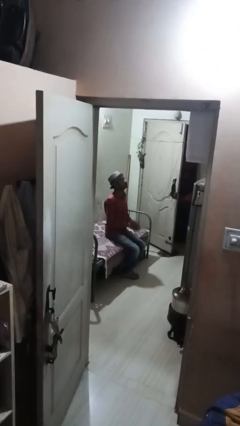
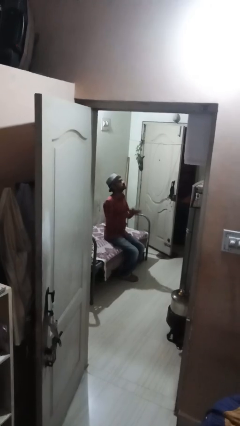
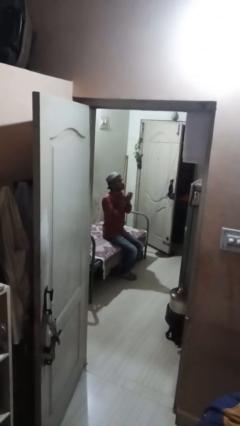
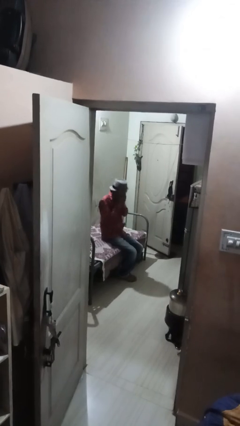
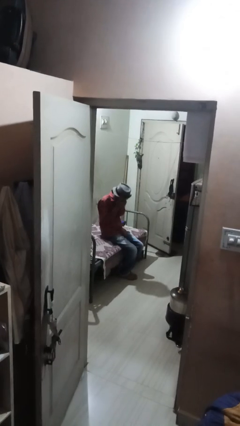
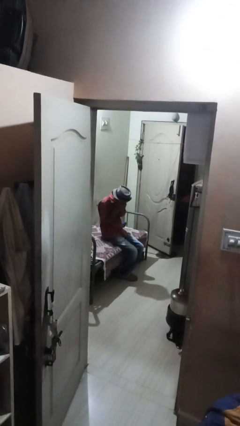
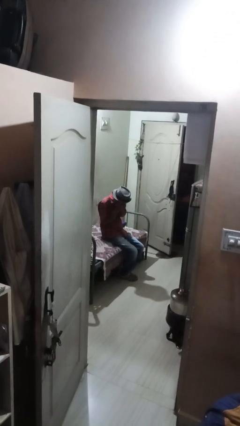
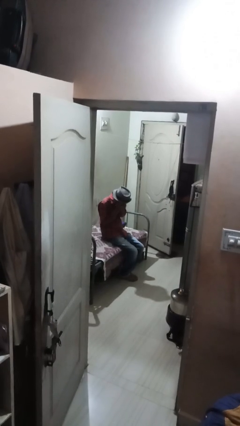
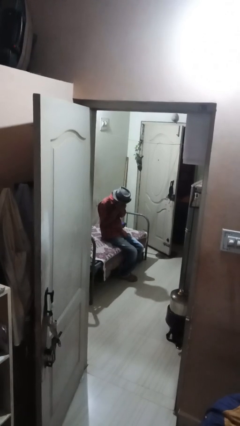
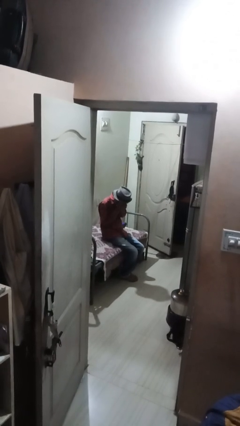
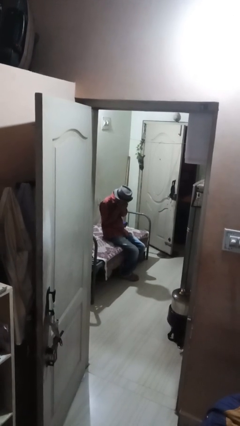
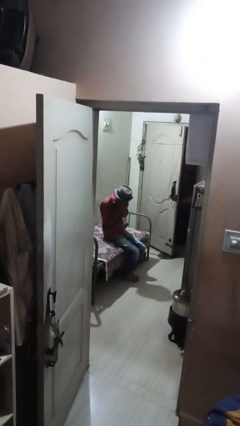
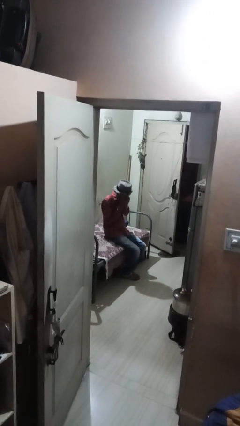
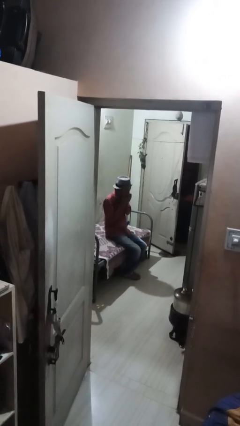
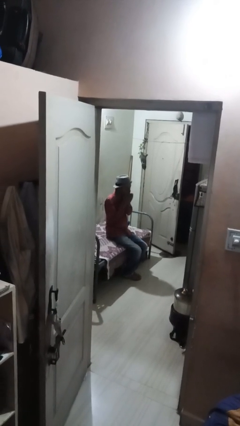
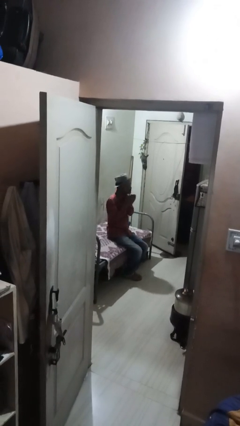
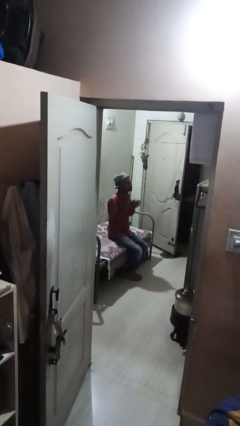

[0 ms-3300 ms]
person sneezes into hand

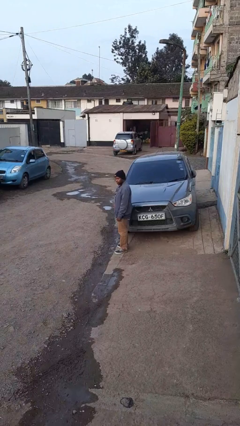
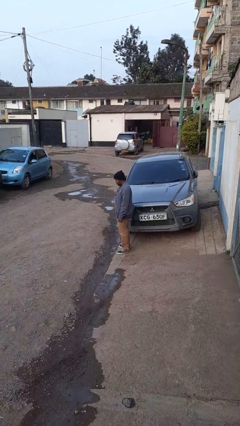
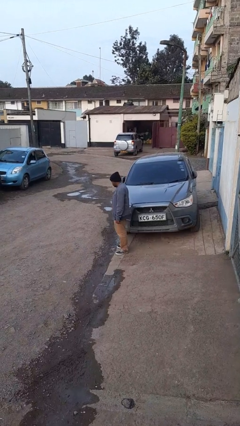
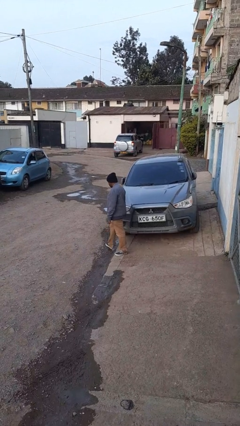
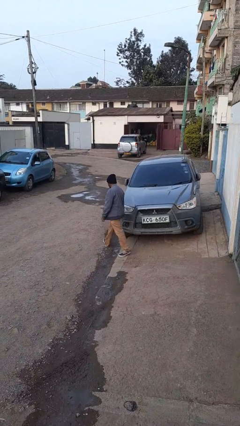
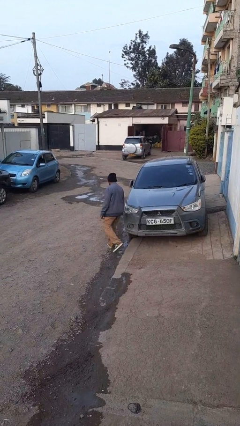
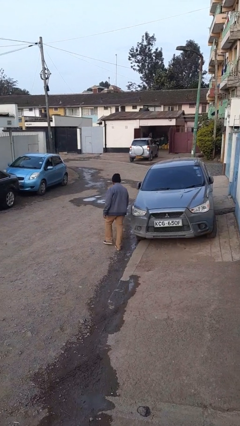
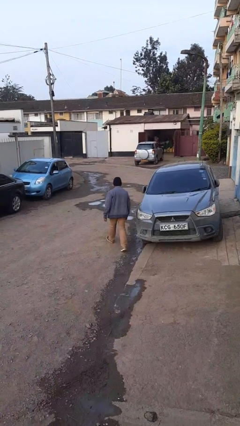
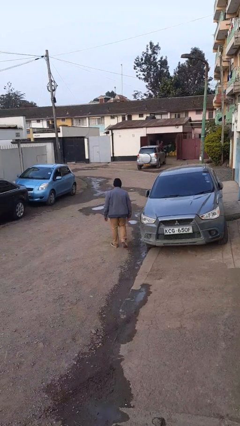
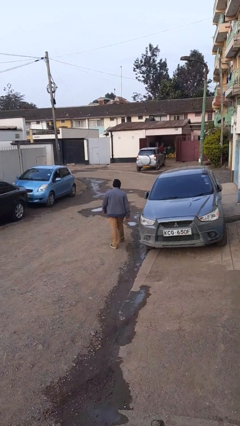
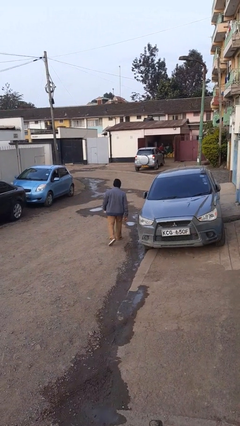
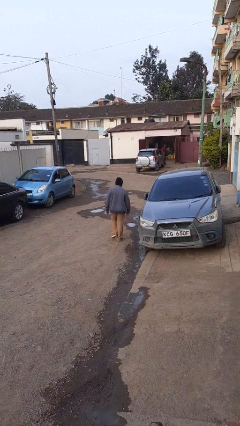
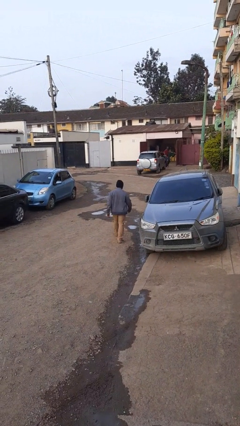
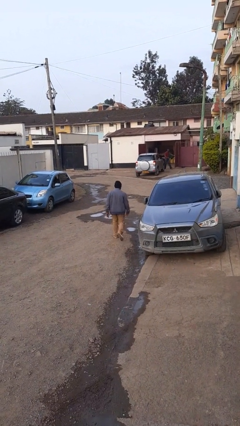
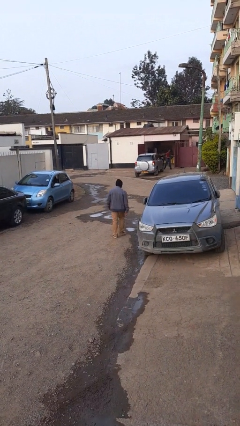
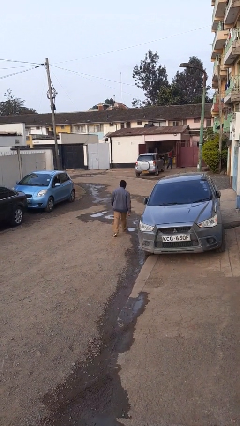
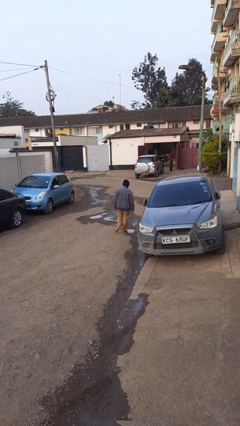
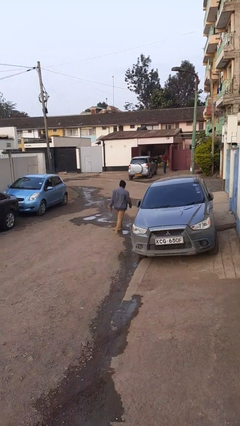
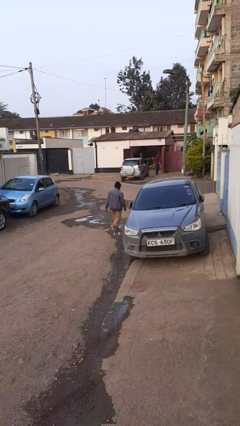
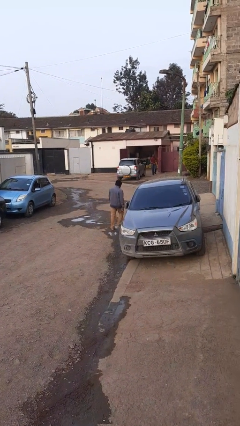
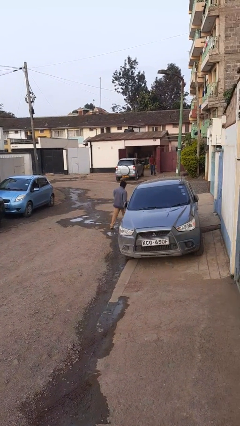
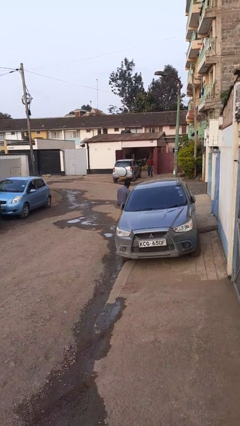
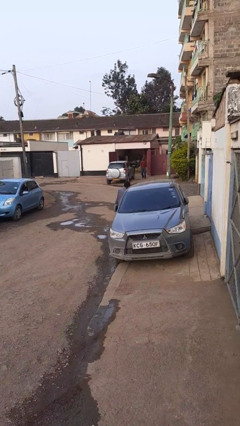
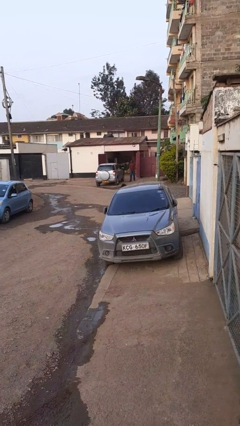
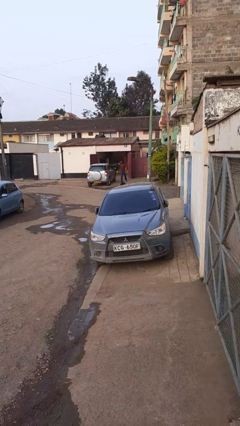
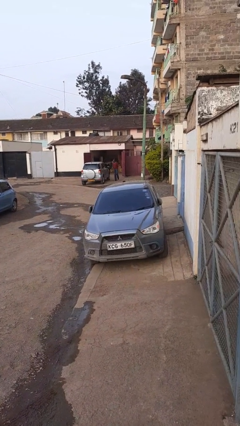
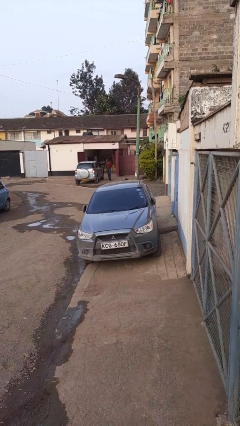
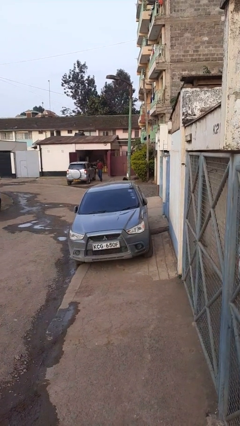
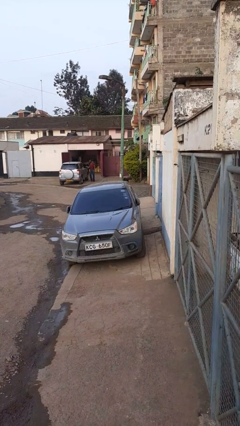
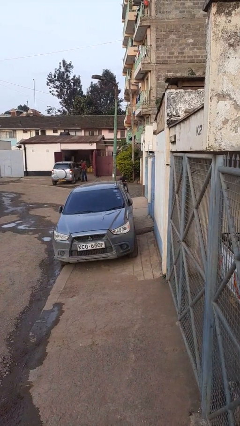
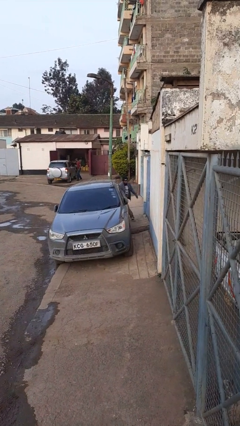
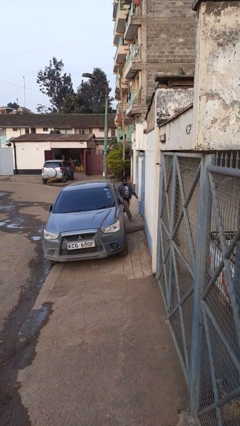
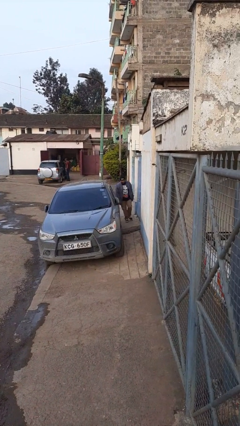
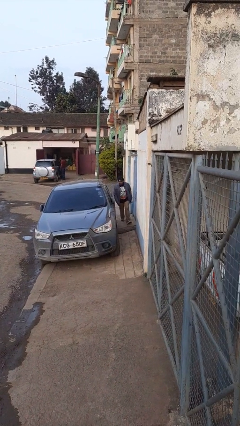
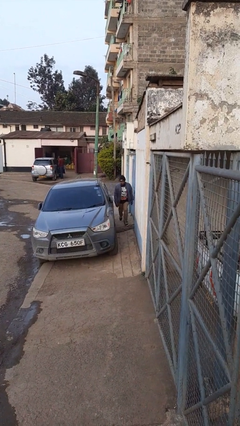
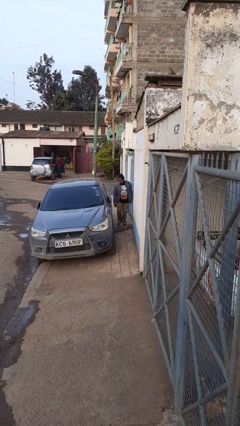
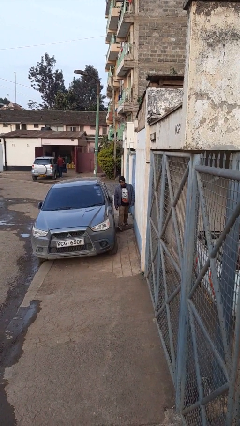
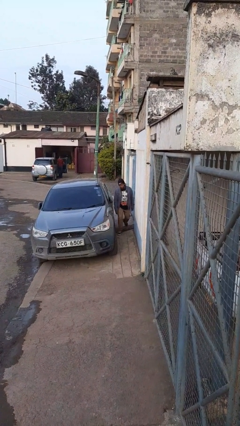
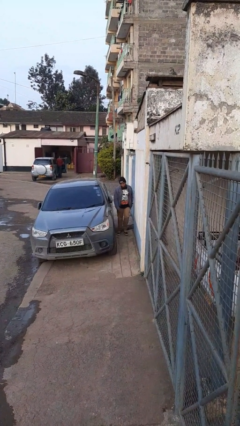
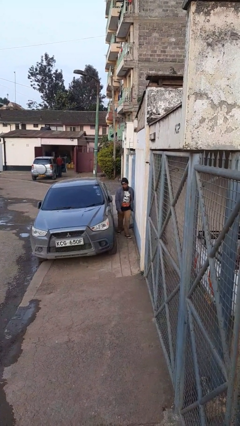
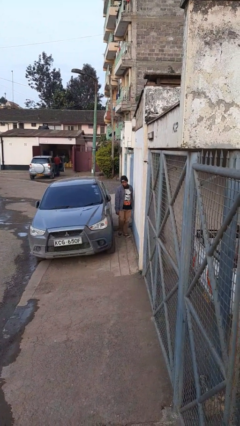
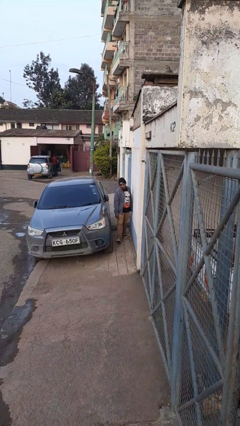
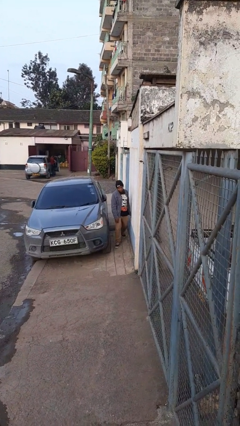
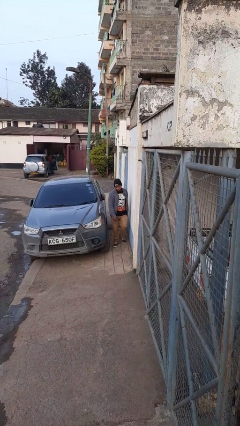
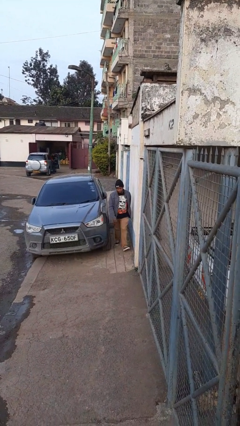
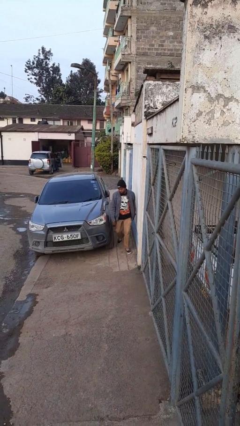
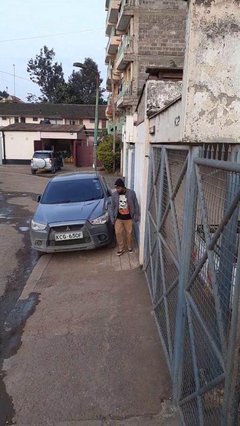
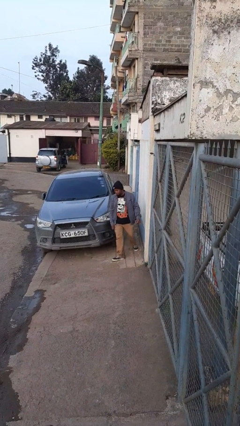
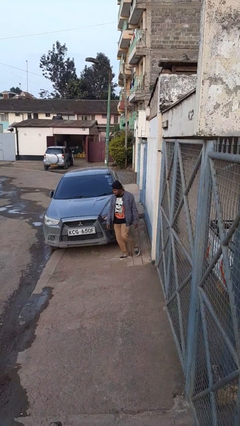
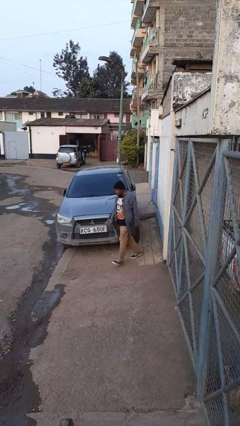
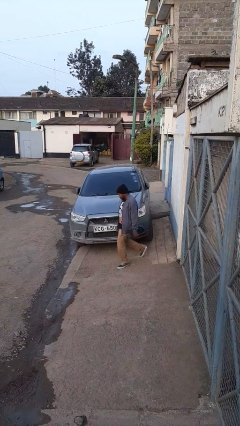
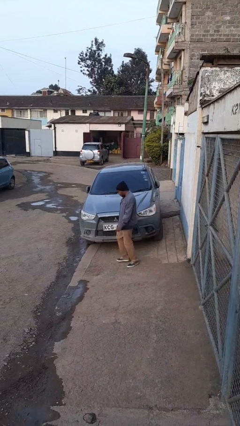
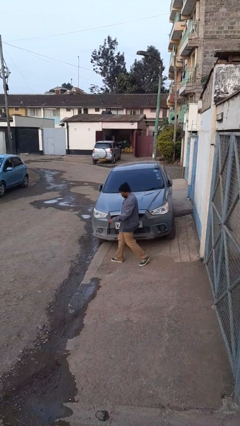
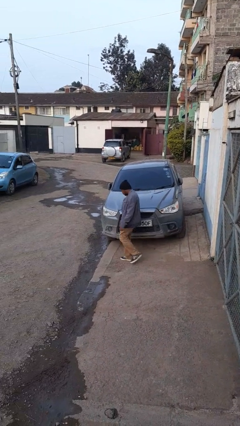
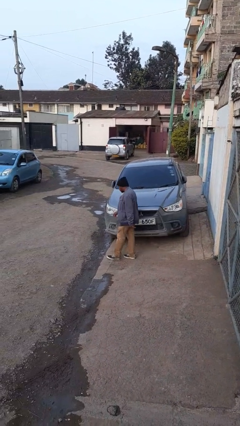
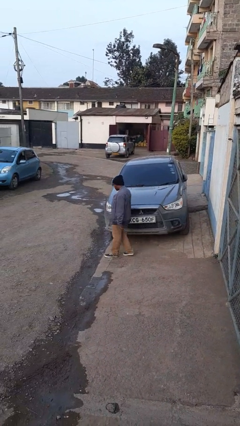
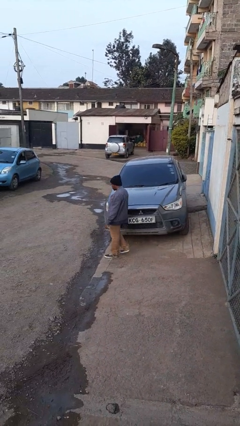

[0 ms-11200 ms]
person walks around car

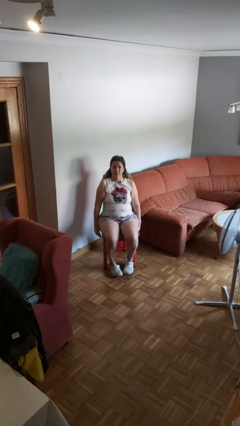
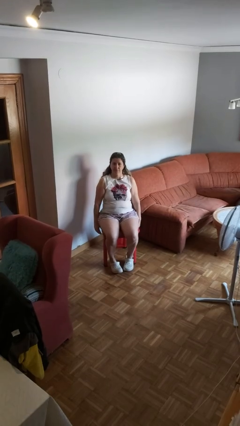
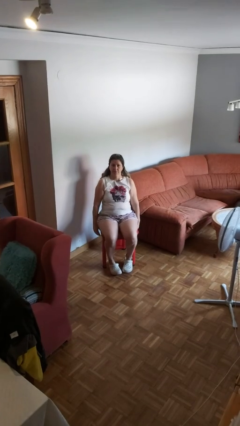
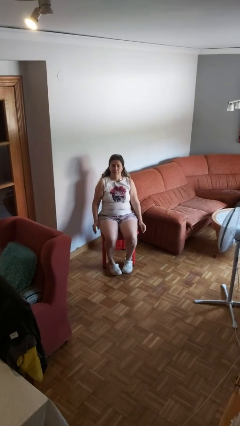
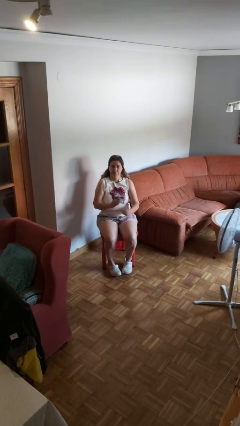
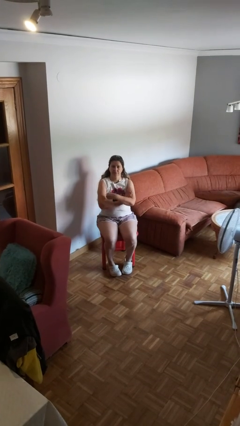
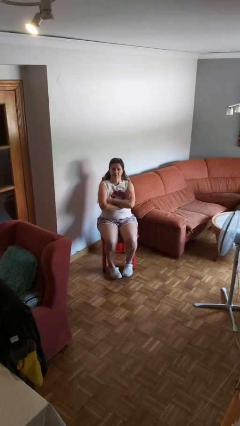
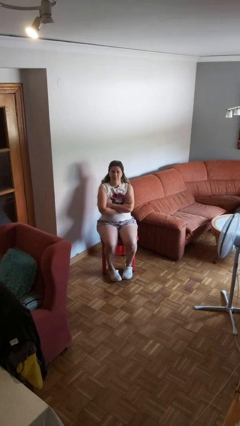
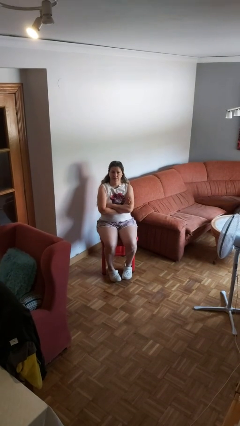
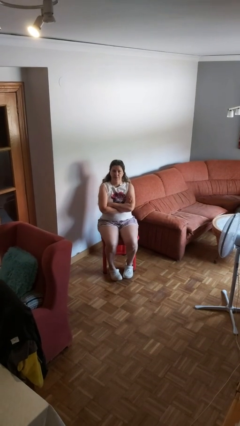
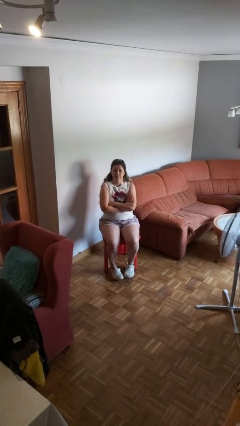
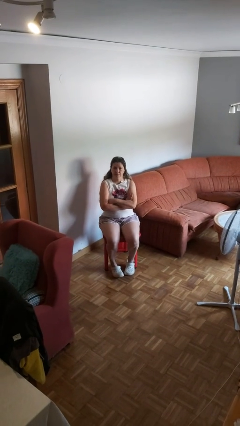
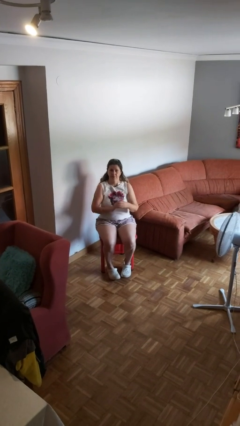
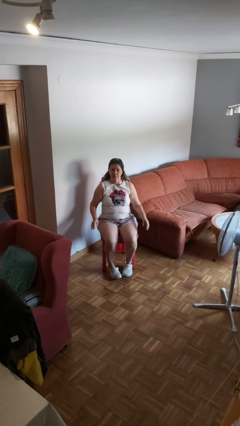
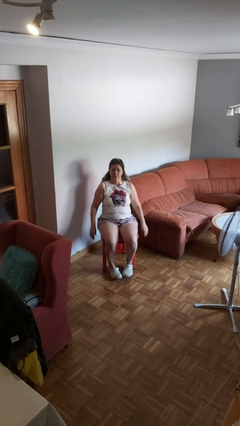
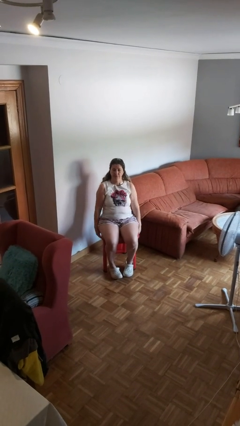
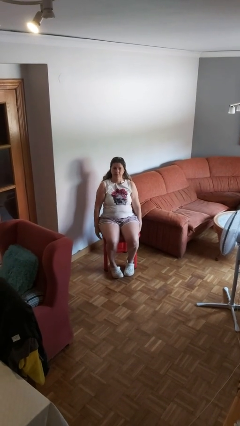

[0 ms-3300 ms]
person crosses arms

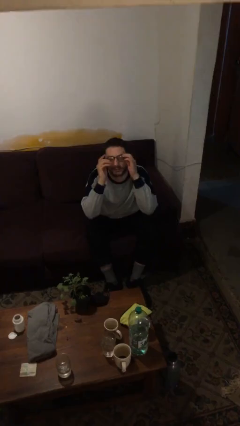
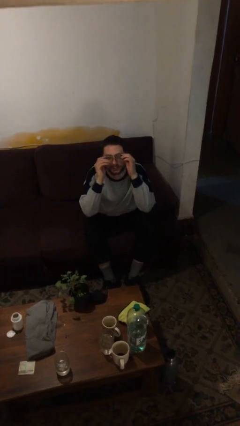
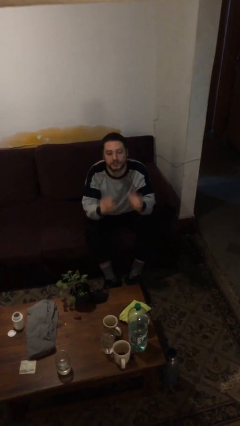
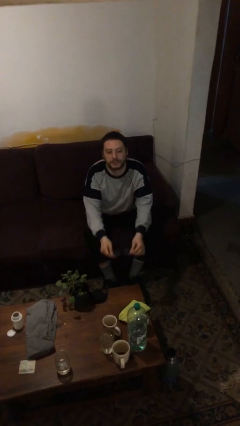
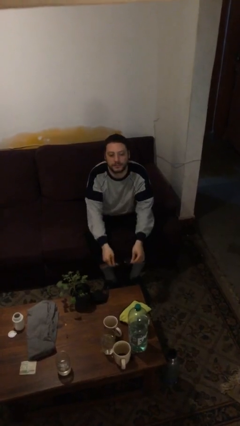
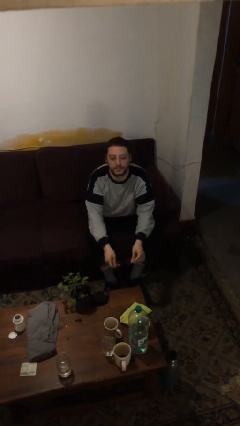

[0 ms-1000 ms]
person takes off glasses
